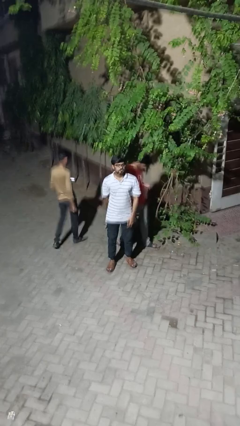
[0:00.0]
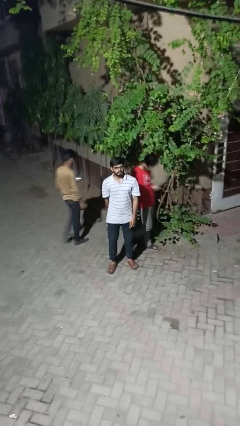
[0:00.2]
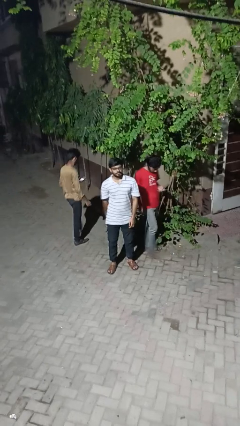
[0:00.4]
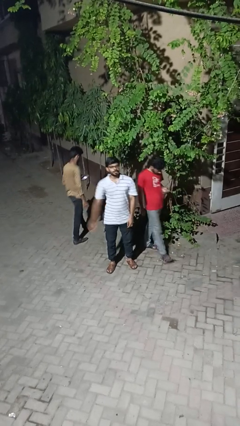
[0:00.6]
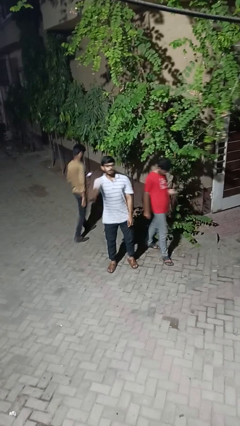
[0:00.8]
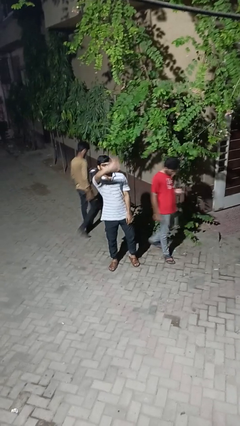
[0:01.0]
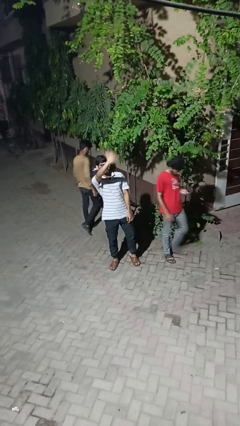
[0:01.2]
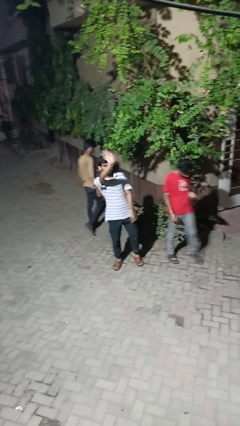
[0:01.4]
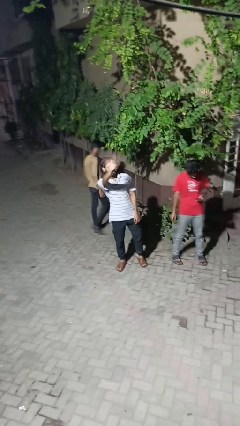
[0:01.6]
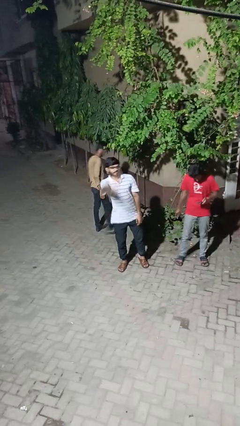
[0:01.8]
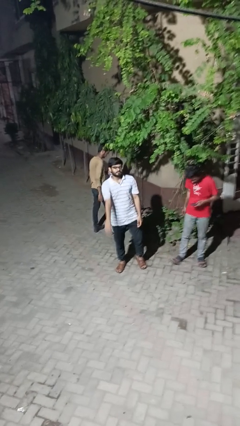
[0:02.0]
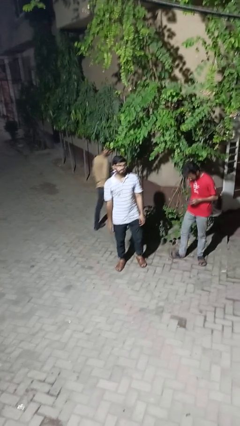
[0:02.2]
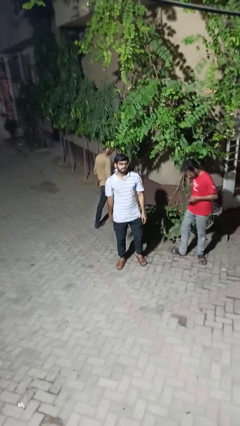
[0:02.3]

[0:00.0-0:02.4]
person waves at person

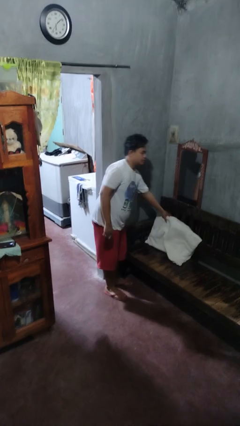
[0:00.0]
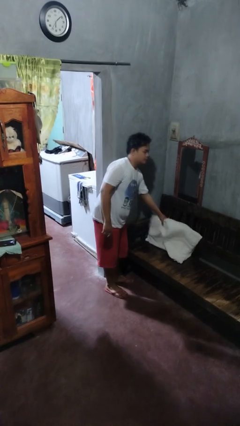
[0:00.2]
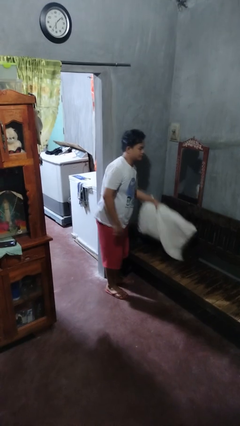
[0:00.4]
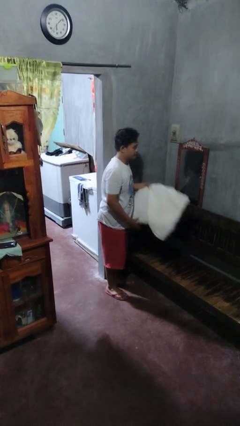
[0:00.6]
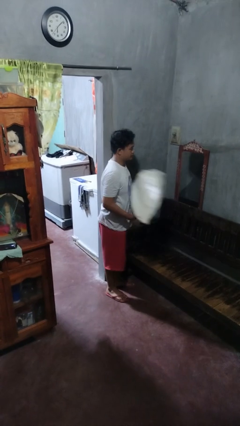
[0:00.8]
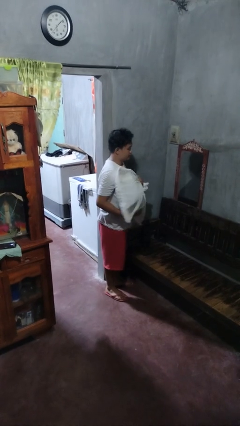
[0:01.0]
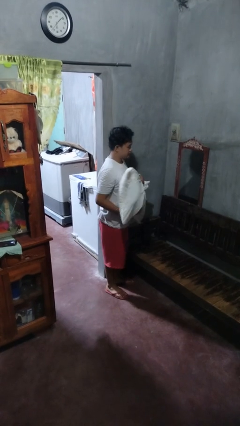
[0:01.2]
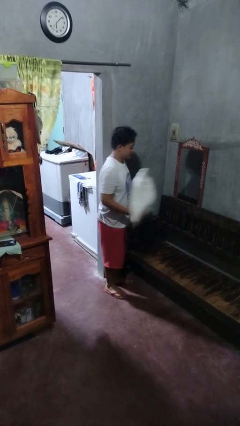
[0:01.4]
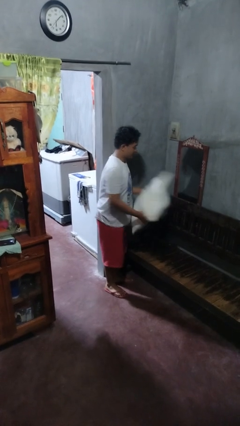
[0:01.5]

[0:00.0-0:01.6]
person picks up object from couch

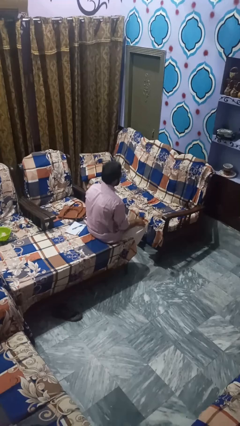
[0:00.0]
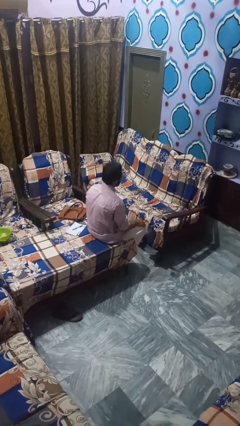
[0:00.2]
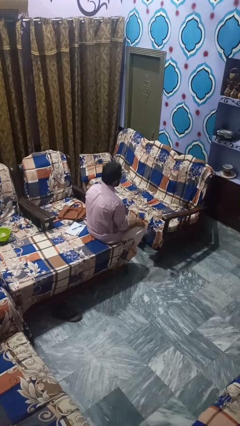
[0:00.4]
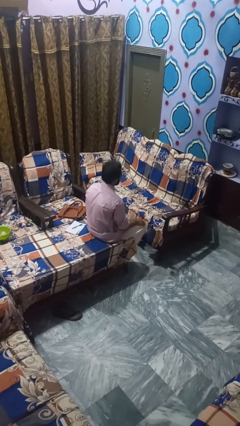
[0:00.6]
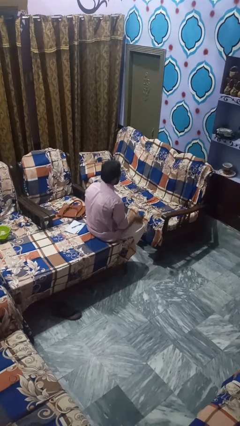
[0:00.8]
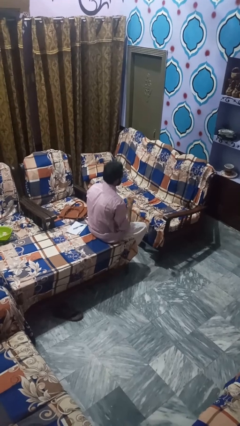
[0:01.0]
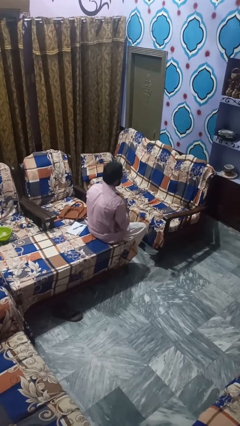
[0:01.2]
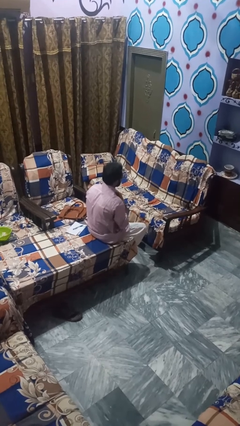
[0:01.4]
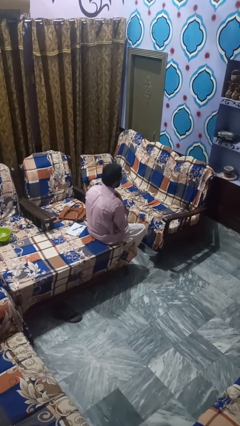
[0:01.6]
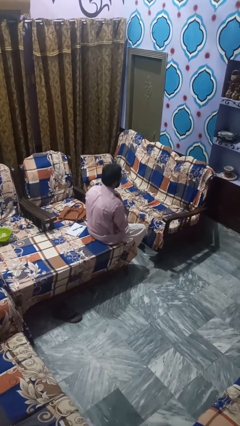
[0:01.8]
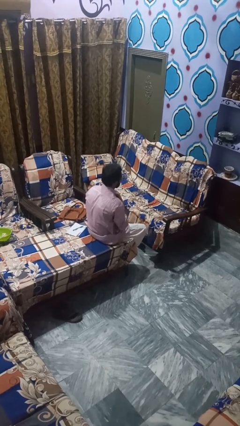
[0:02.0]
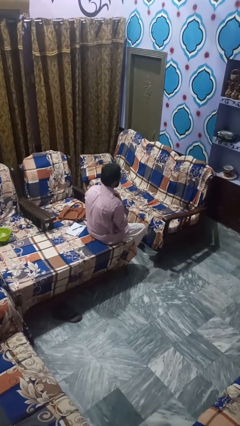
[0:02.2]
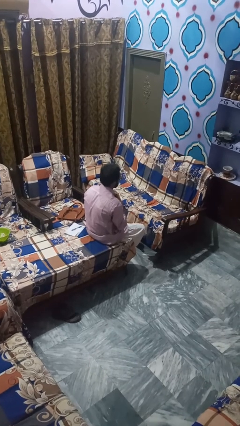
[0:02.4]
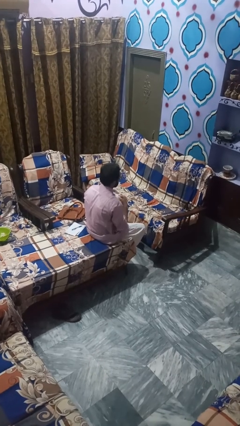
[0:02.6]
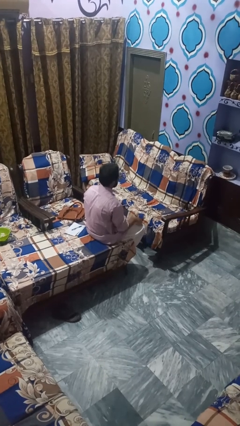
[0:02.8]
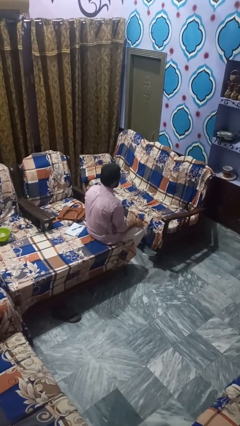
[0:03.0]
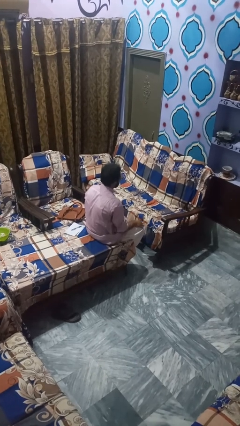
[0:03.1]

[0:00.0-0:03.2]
person unbuttons shirt

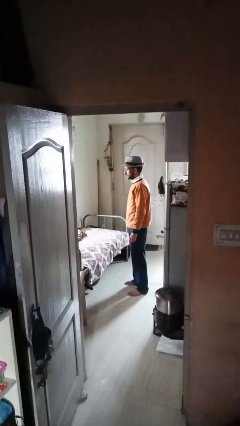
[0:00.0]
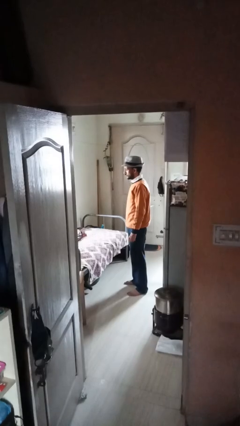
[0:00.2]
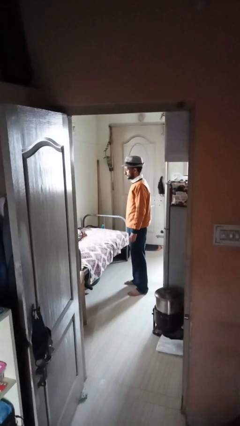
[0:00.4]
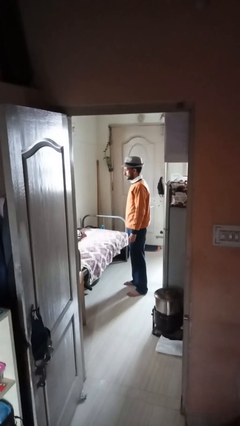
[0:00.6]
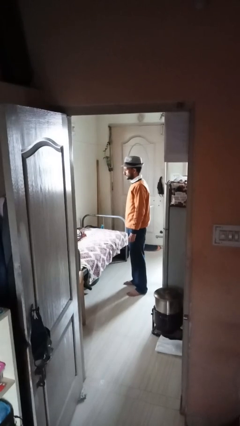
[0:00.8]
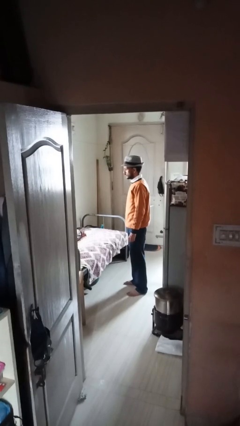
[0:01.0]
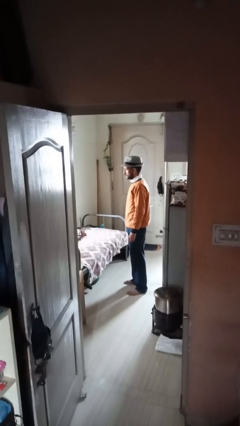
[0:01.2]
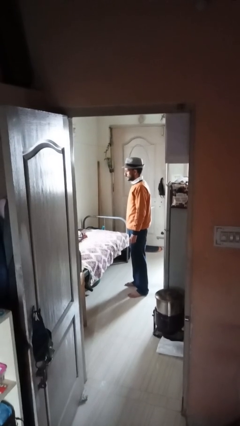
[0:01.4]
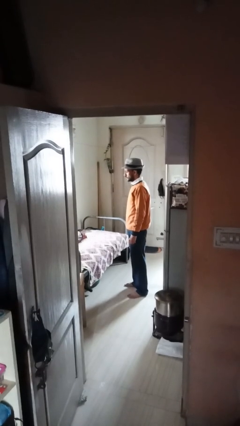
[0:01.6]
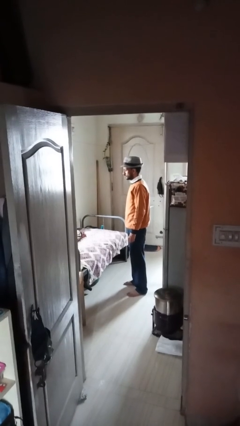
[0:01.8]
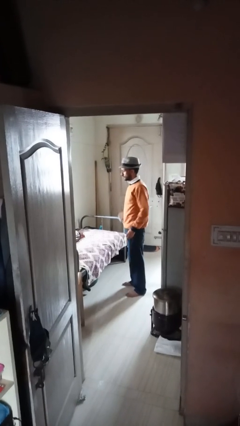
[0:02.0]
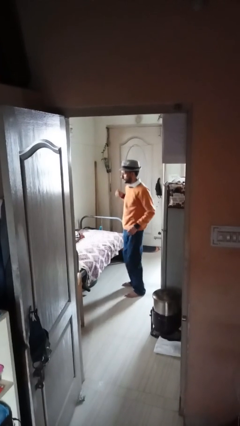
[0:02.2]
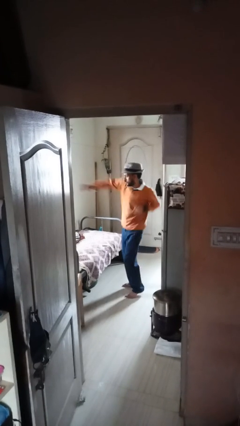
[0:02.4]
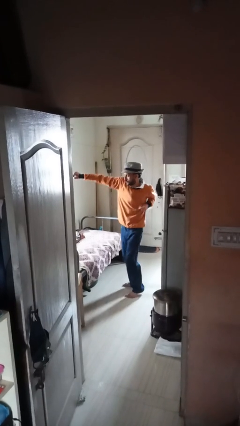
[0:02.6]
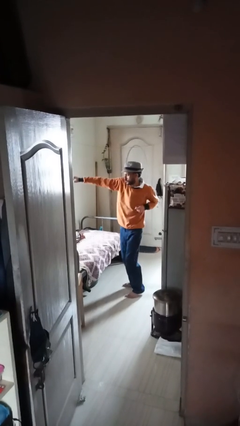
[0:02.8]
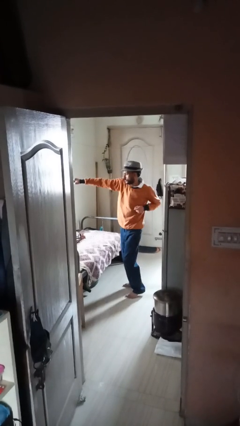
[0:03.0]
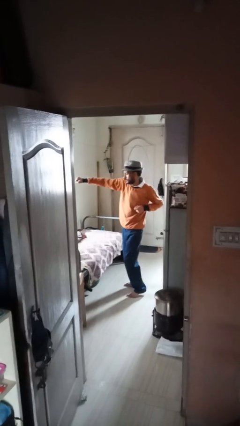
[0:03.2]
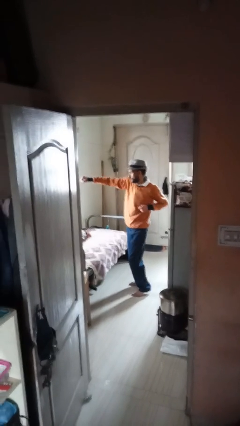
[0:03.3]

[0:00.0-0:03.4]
person punches

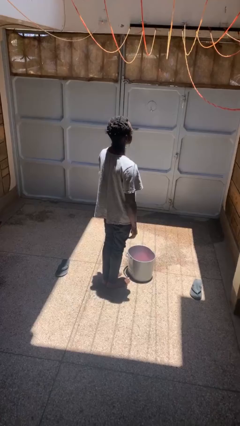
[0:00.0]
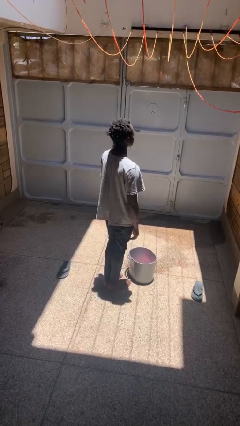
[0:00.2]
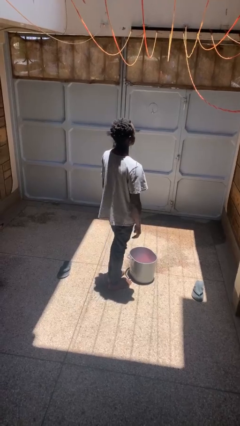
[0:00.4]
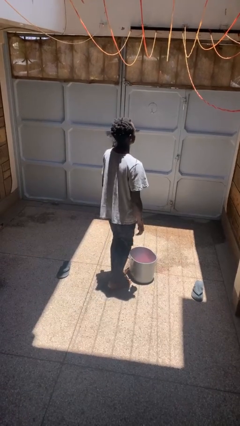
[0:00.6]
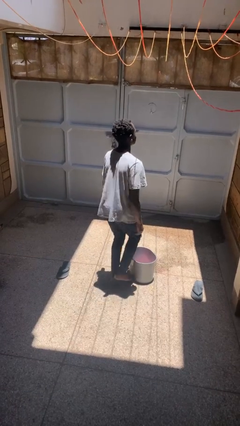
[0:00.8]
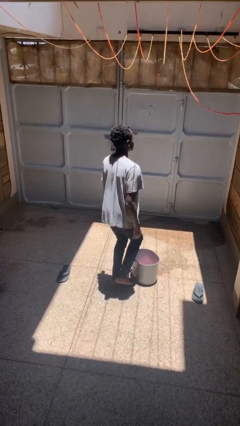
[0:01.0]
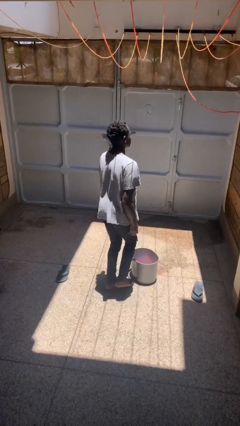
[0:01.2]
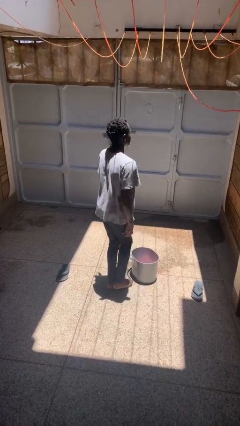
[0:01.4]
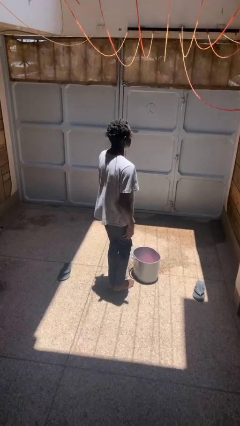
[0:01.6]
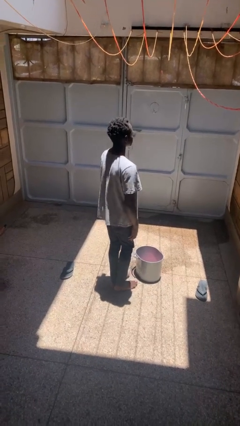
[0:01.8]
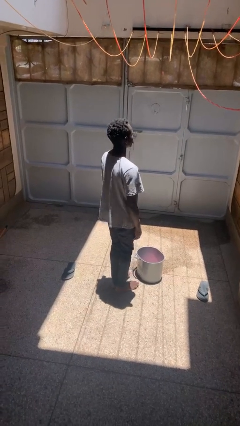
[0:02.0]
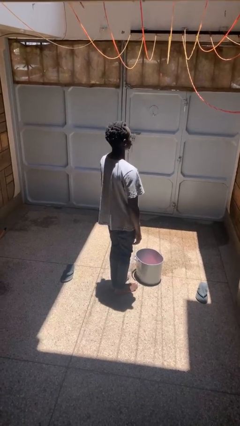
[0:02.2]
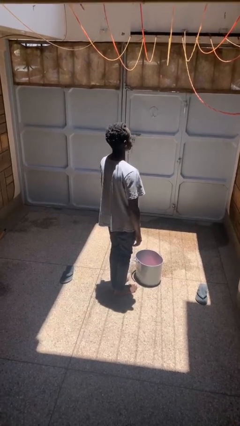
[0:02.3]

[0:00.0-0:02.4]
person touches earlobe

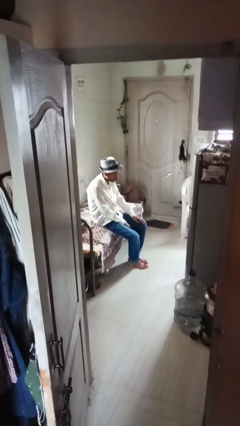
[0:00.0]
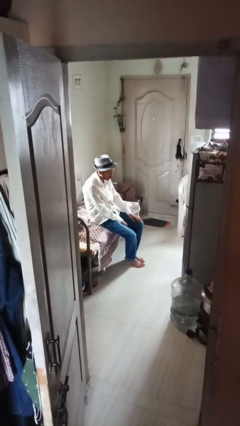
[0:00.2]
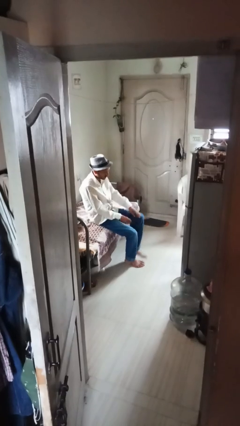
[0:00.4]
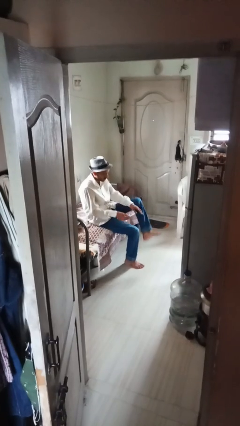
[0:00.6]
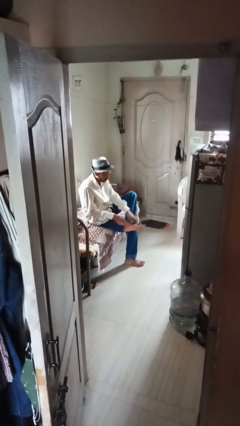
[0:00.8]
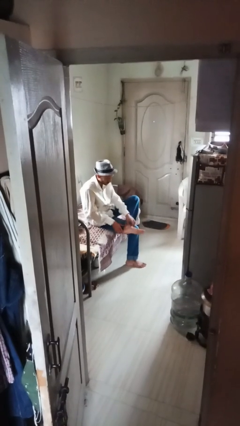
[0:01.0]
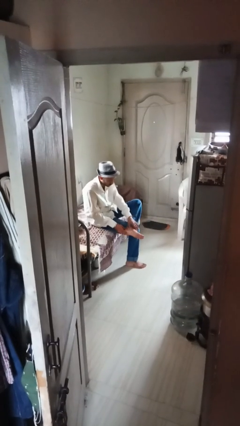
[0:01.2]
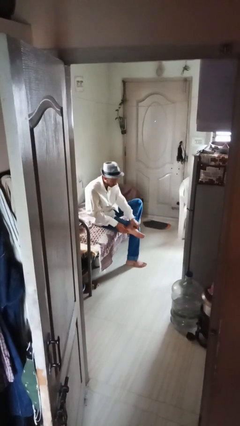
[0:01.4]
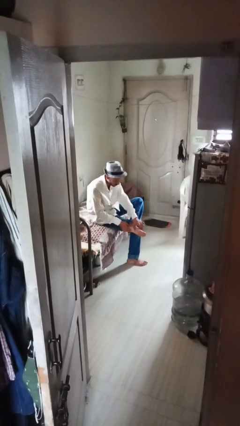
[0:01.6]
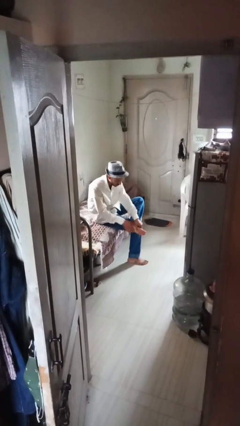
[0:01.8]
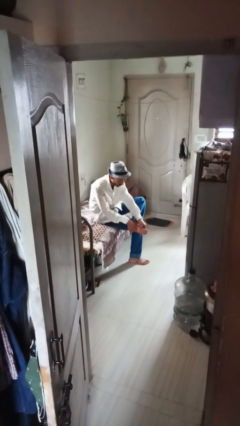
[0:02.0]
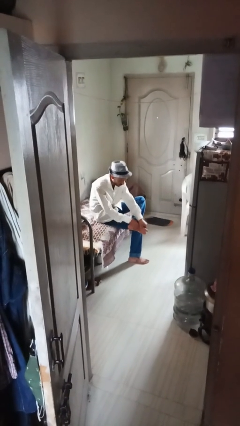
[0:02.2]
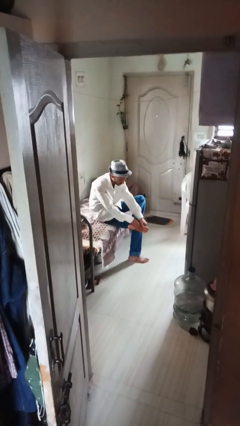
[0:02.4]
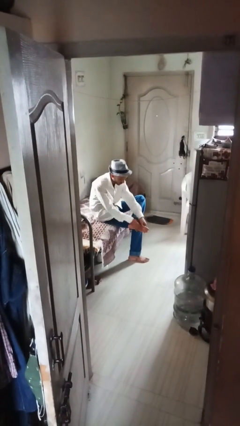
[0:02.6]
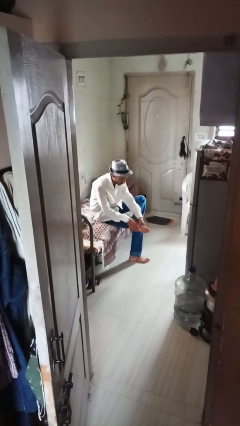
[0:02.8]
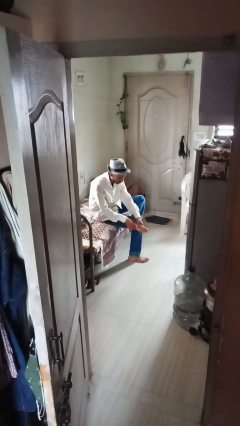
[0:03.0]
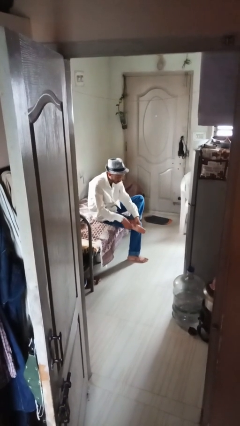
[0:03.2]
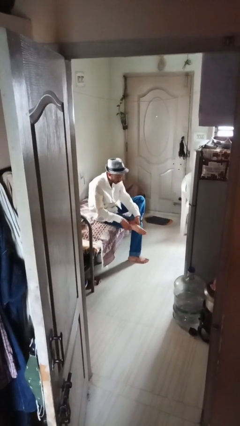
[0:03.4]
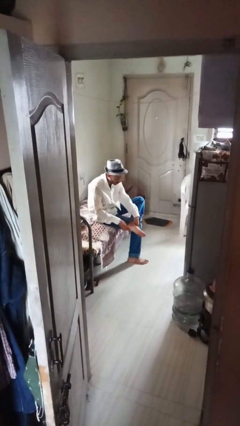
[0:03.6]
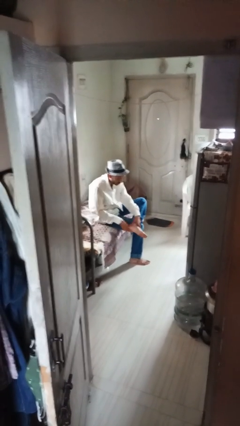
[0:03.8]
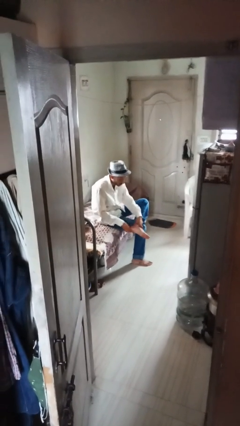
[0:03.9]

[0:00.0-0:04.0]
person rubs foot

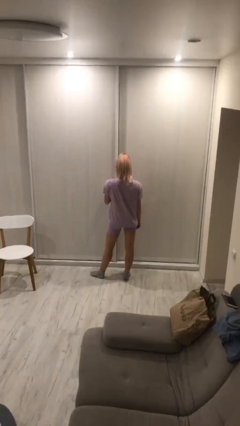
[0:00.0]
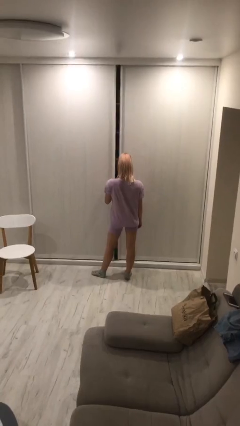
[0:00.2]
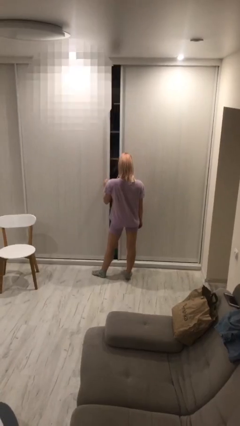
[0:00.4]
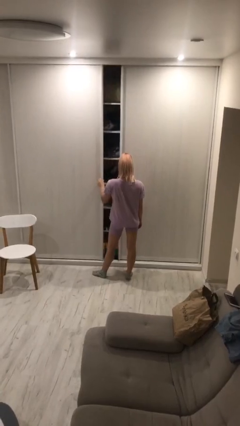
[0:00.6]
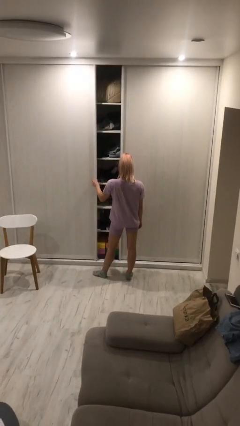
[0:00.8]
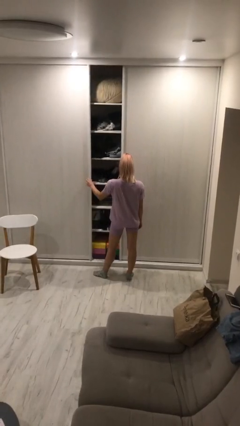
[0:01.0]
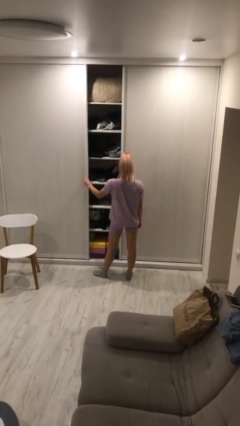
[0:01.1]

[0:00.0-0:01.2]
person opens sliding door
